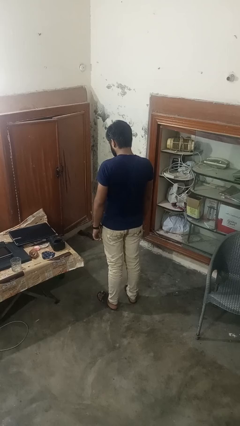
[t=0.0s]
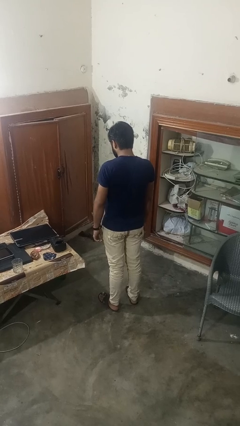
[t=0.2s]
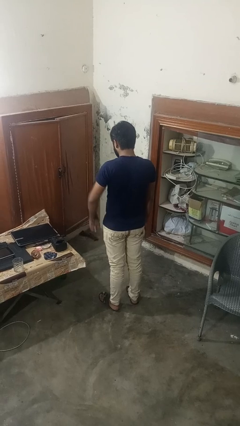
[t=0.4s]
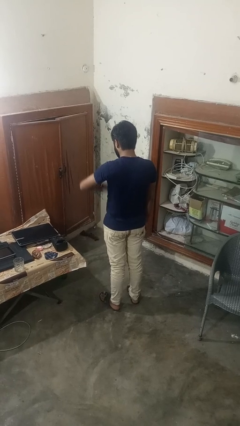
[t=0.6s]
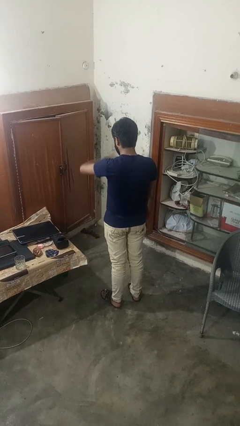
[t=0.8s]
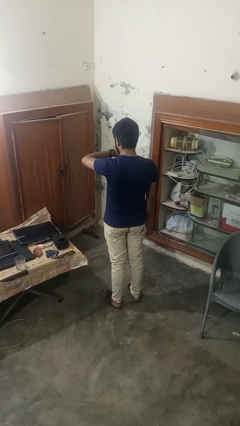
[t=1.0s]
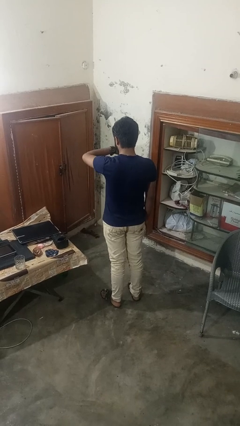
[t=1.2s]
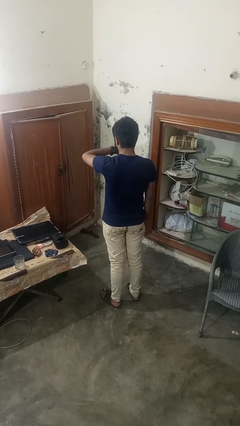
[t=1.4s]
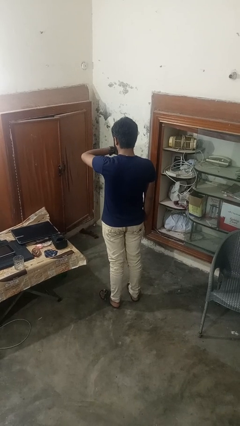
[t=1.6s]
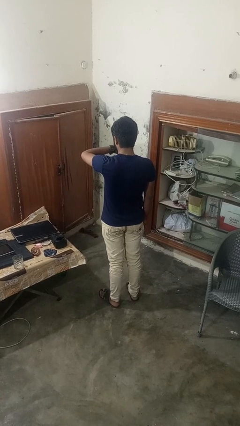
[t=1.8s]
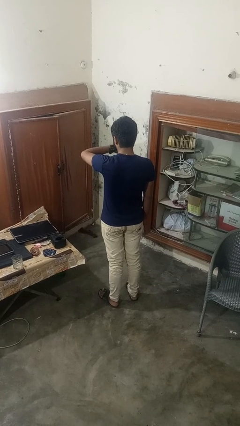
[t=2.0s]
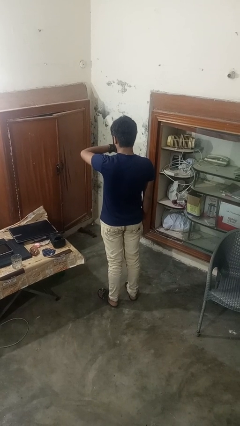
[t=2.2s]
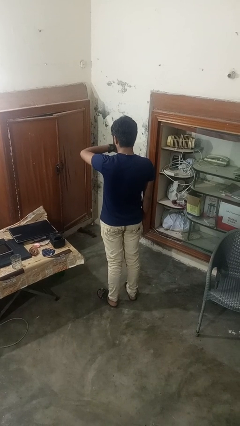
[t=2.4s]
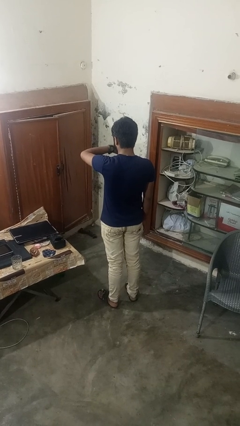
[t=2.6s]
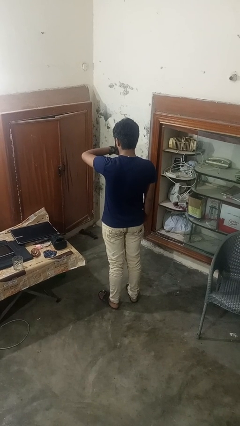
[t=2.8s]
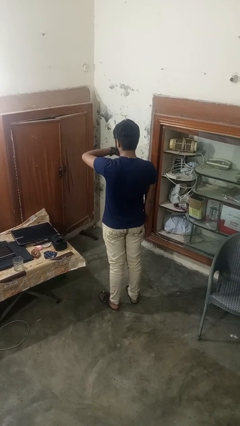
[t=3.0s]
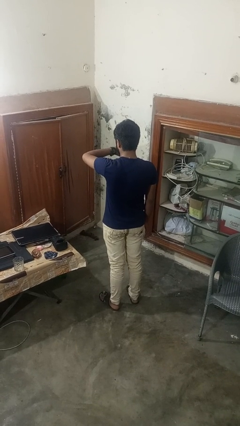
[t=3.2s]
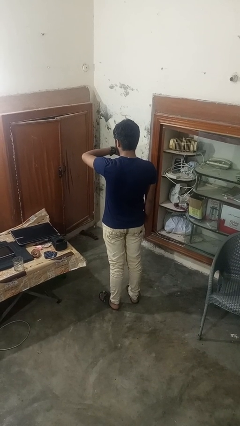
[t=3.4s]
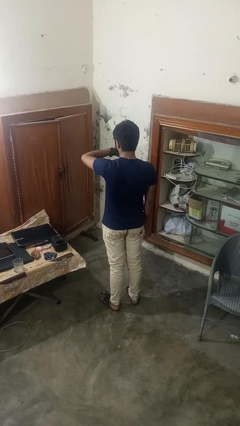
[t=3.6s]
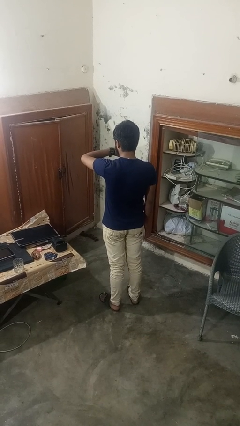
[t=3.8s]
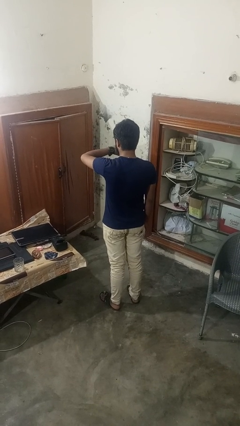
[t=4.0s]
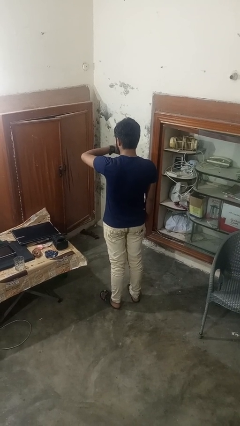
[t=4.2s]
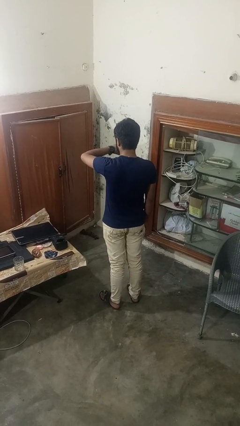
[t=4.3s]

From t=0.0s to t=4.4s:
person looks at wristwatch

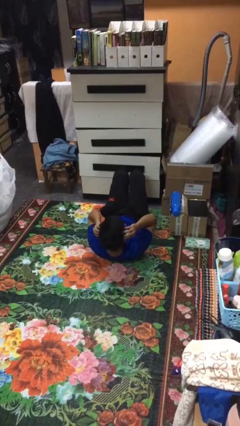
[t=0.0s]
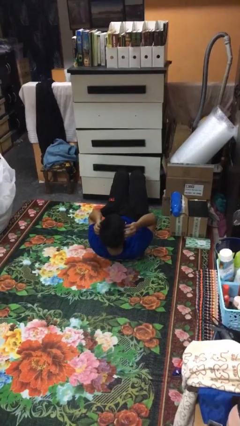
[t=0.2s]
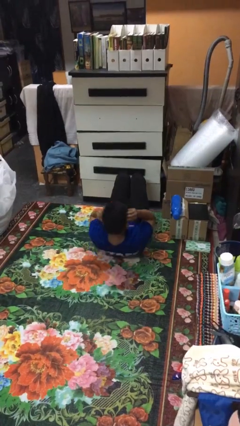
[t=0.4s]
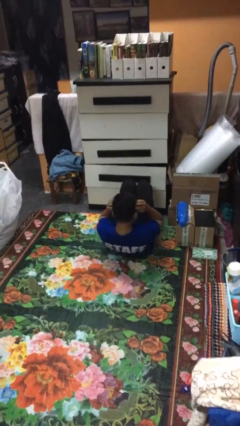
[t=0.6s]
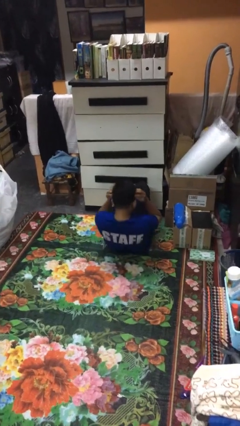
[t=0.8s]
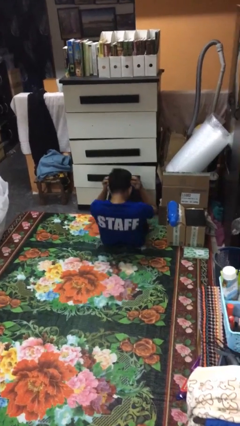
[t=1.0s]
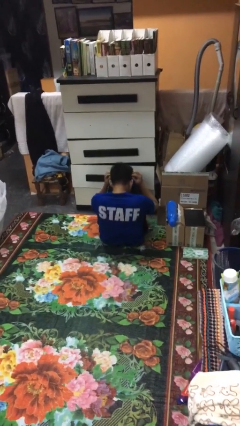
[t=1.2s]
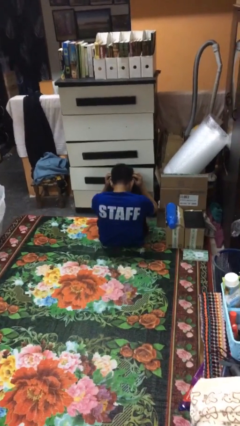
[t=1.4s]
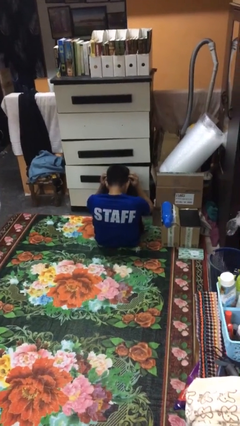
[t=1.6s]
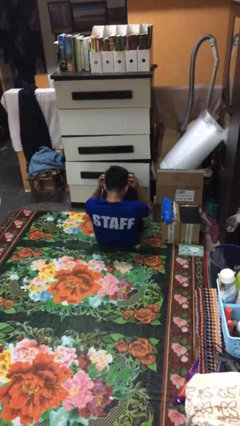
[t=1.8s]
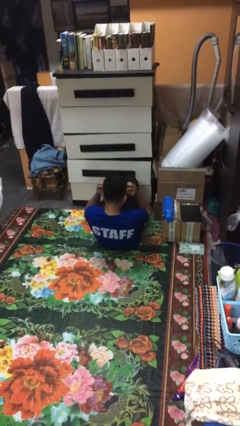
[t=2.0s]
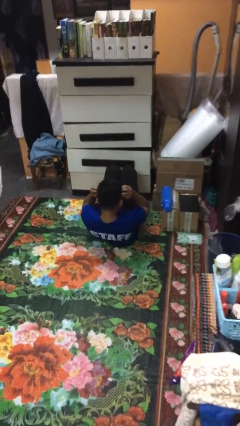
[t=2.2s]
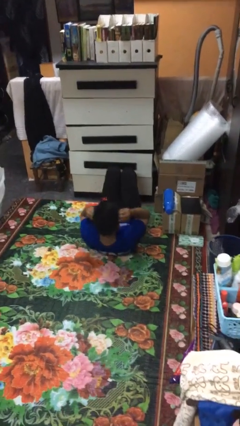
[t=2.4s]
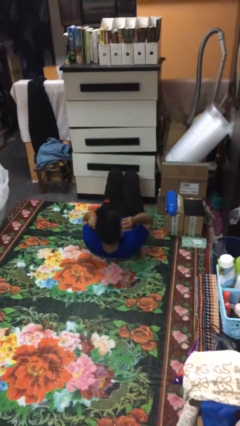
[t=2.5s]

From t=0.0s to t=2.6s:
person exercises with situp

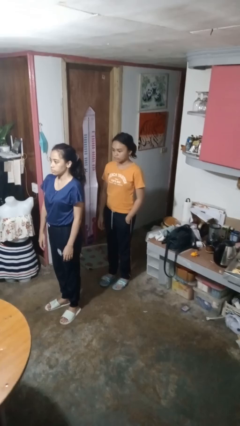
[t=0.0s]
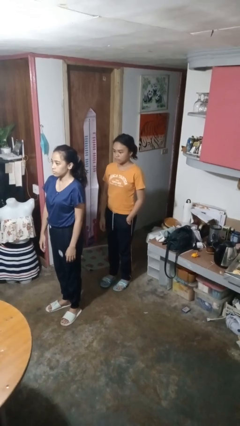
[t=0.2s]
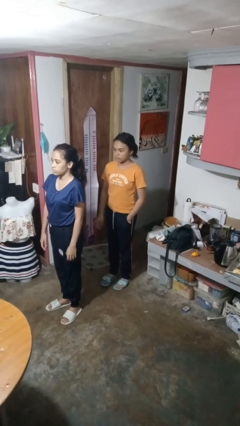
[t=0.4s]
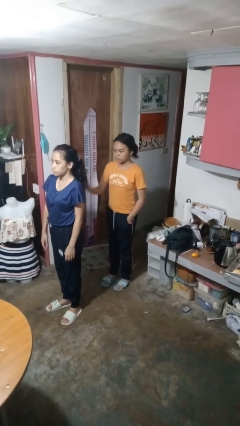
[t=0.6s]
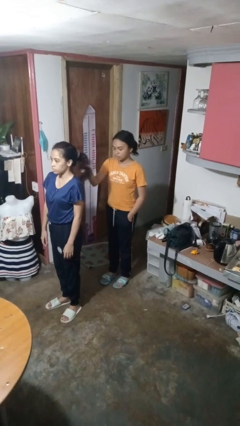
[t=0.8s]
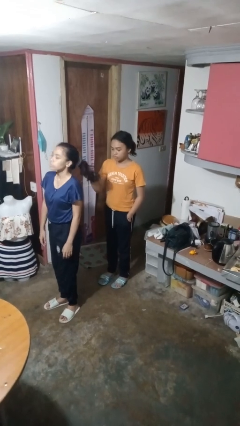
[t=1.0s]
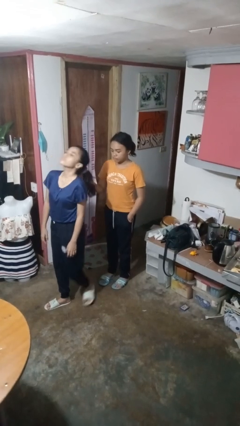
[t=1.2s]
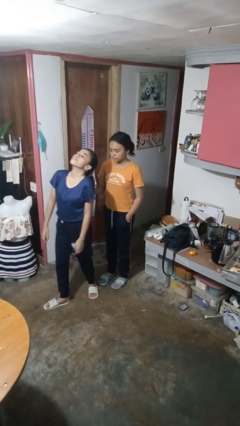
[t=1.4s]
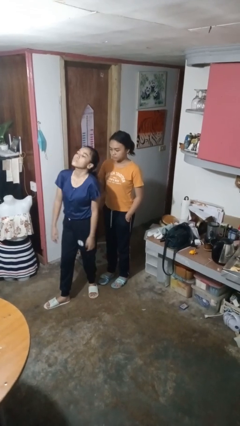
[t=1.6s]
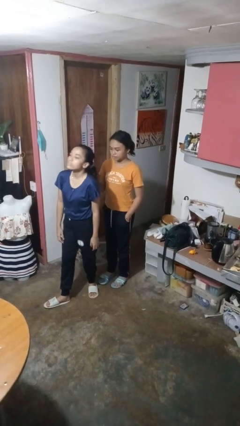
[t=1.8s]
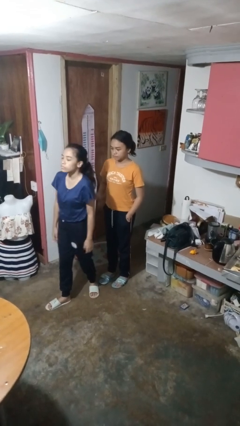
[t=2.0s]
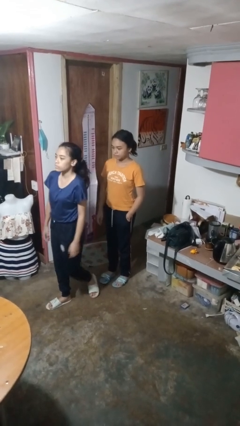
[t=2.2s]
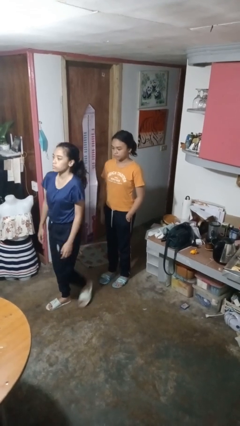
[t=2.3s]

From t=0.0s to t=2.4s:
person grabs person by hair

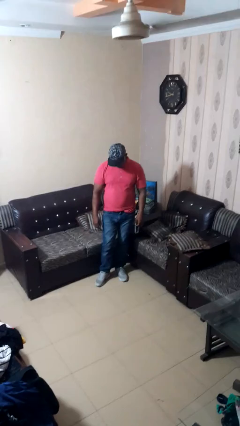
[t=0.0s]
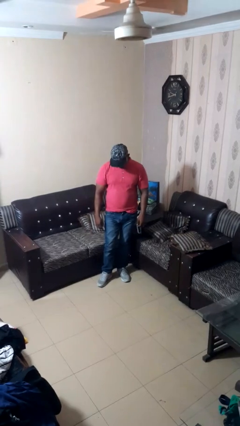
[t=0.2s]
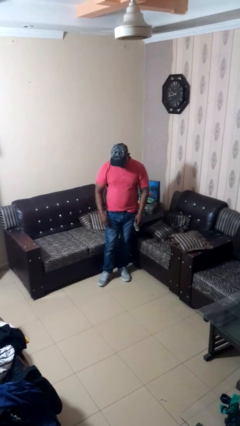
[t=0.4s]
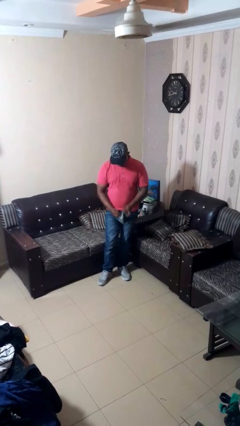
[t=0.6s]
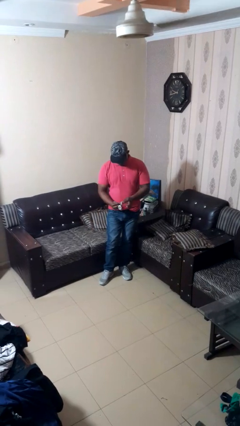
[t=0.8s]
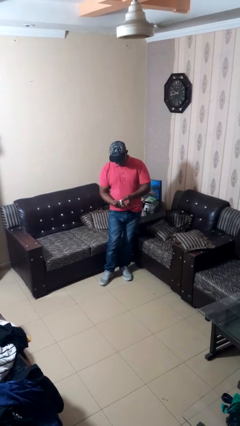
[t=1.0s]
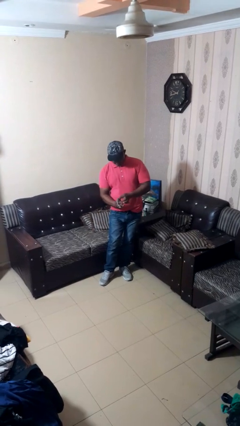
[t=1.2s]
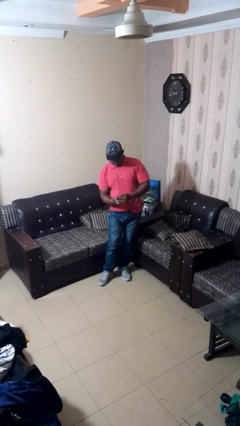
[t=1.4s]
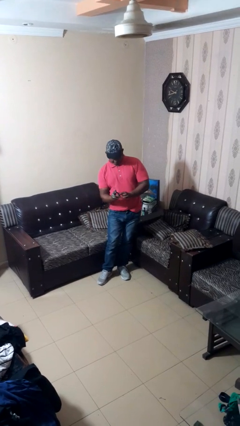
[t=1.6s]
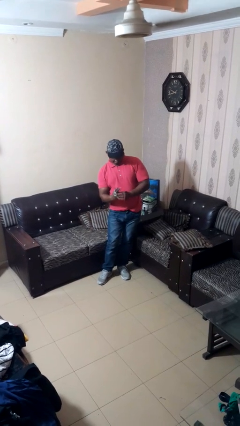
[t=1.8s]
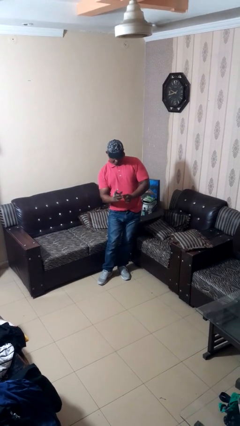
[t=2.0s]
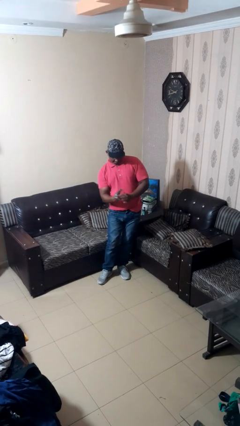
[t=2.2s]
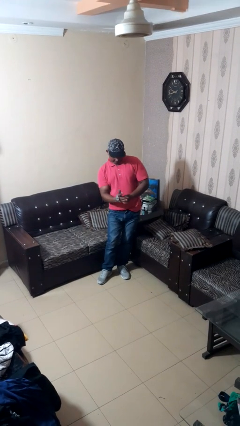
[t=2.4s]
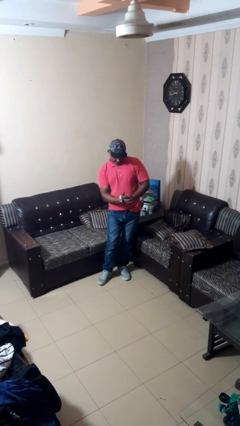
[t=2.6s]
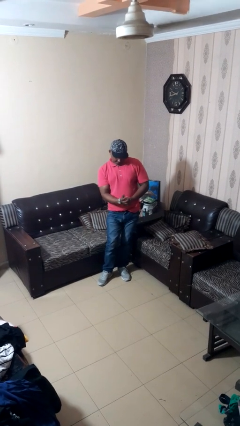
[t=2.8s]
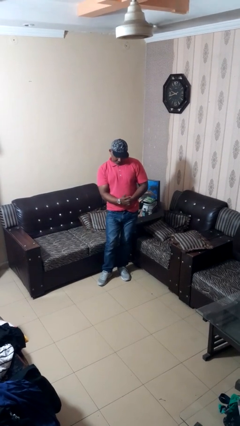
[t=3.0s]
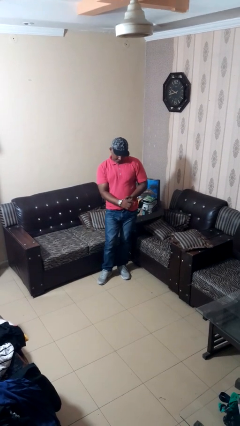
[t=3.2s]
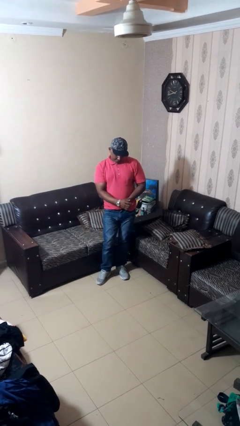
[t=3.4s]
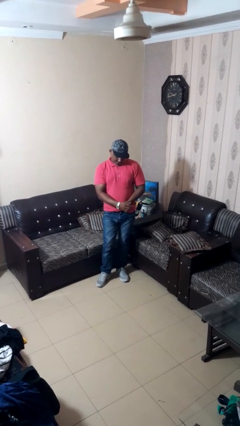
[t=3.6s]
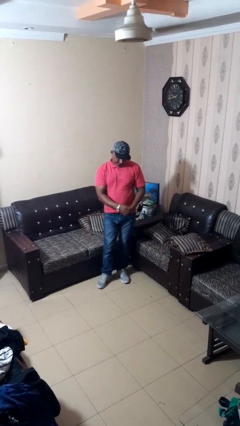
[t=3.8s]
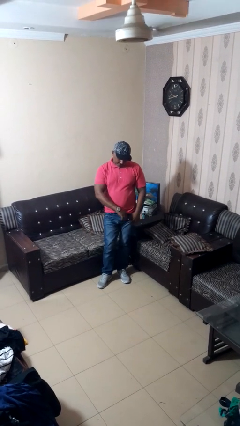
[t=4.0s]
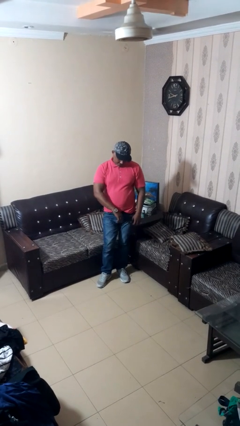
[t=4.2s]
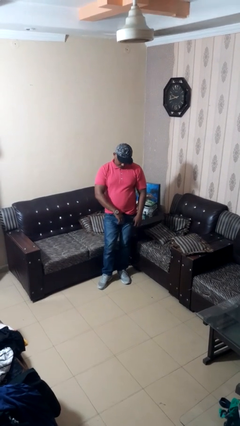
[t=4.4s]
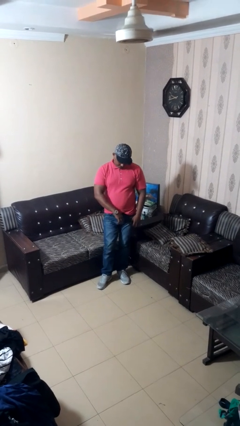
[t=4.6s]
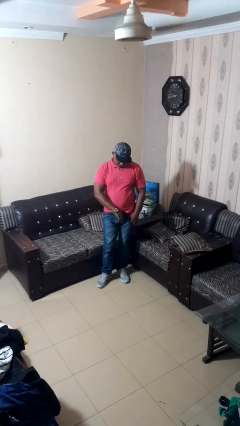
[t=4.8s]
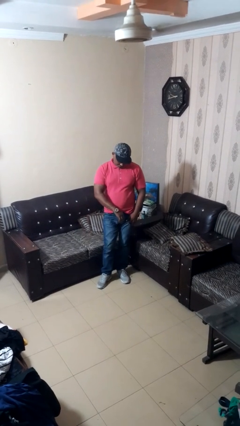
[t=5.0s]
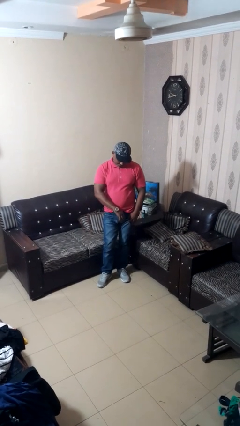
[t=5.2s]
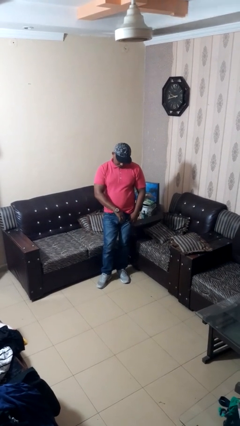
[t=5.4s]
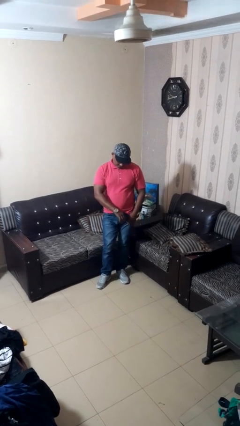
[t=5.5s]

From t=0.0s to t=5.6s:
person puts on wristwatch

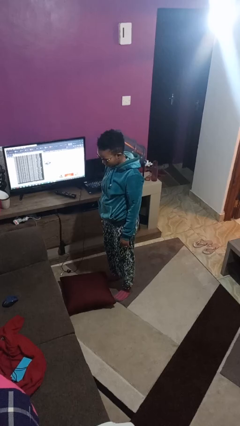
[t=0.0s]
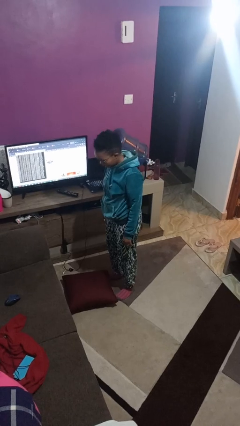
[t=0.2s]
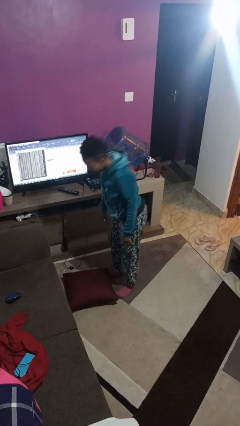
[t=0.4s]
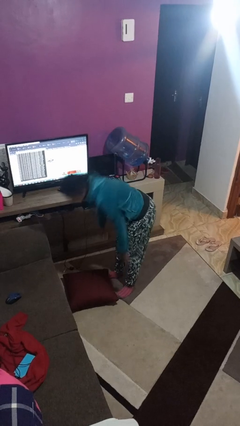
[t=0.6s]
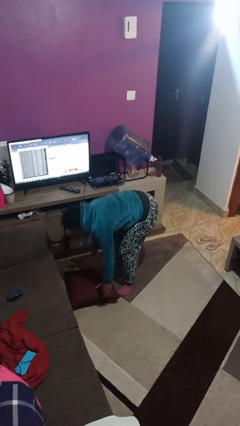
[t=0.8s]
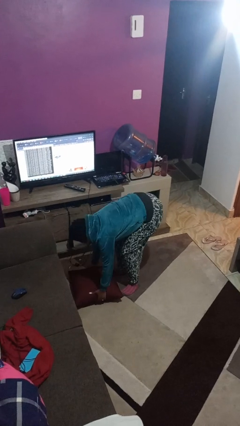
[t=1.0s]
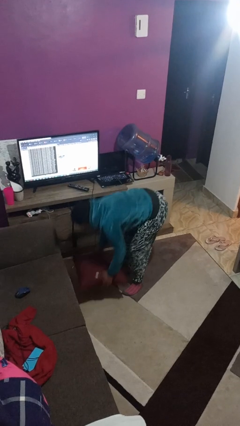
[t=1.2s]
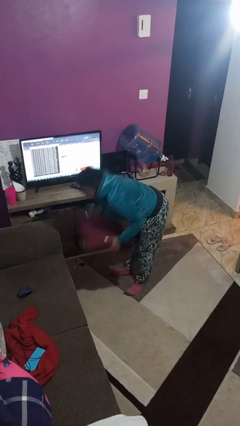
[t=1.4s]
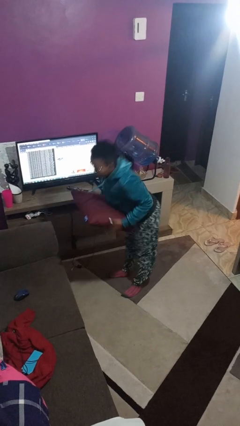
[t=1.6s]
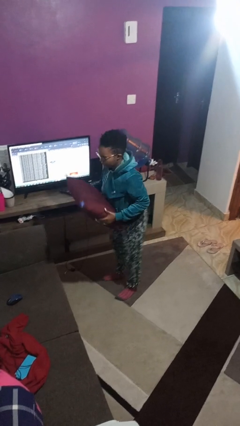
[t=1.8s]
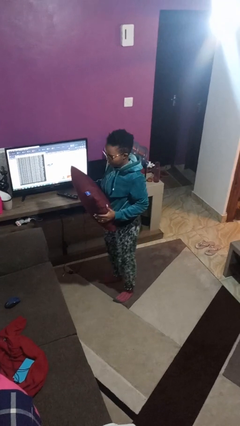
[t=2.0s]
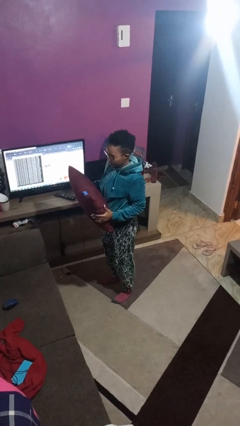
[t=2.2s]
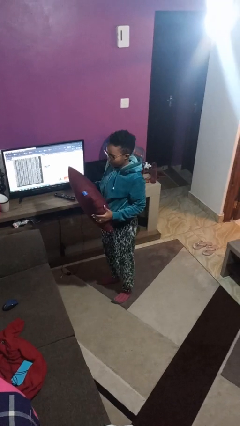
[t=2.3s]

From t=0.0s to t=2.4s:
person picks up object from floor

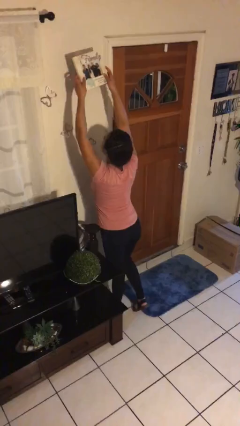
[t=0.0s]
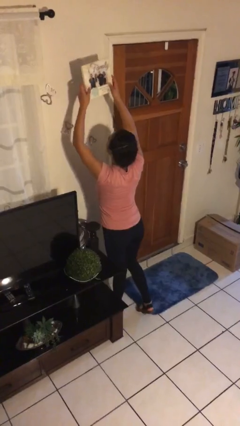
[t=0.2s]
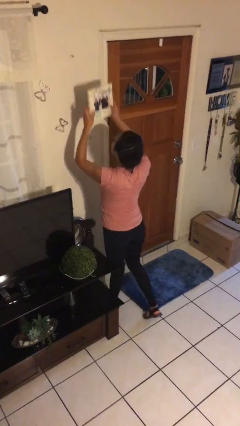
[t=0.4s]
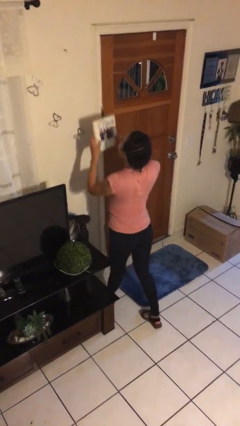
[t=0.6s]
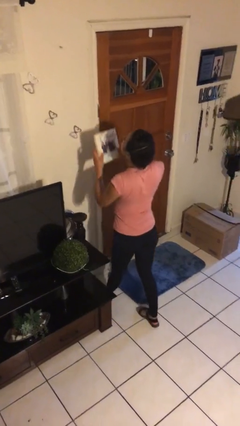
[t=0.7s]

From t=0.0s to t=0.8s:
person takes down picture frame
